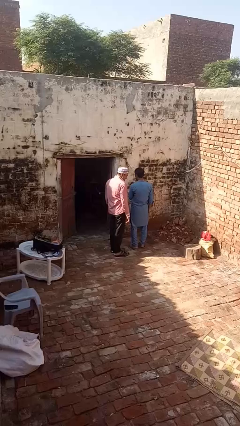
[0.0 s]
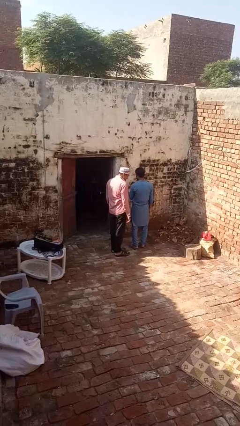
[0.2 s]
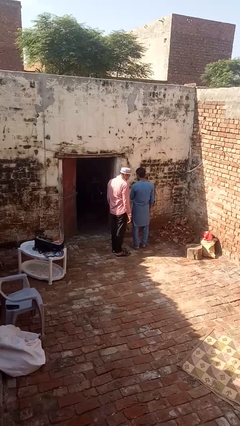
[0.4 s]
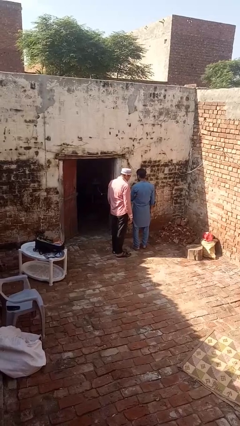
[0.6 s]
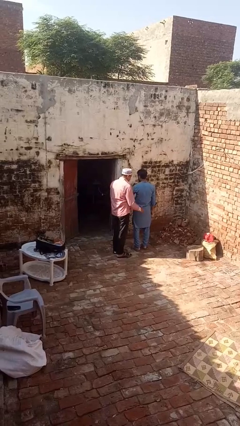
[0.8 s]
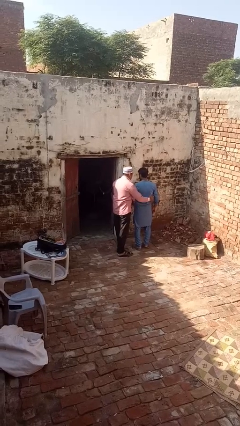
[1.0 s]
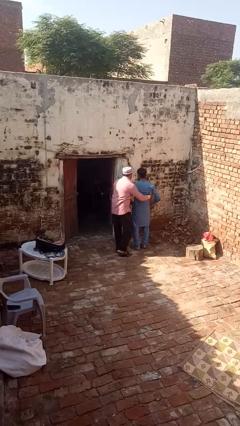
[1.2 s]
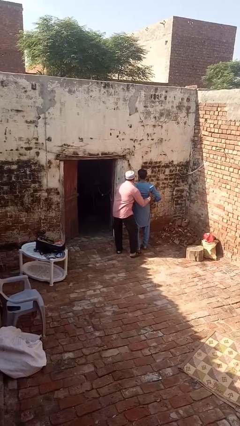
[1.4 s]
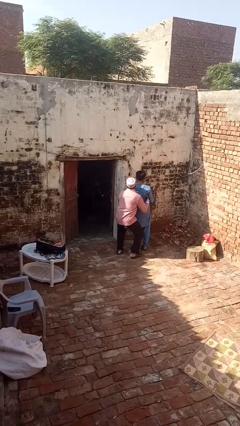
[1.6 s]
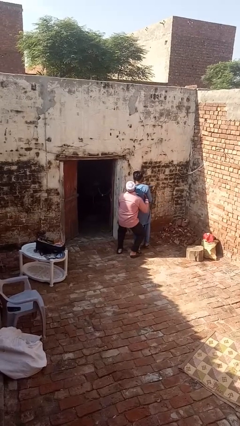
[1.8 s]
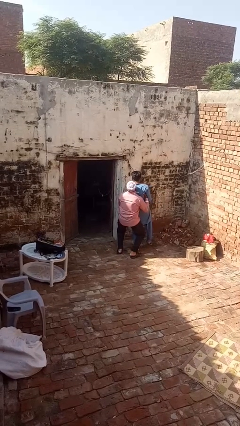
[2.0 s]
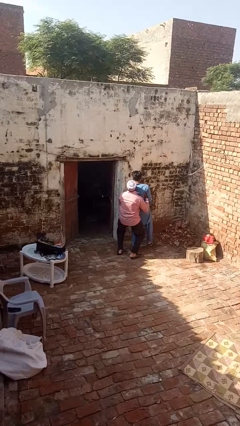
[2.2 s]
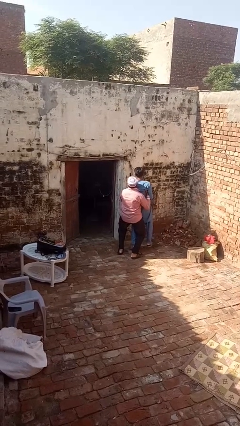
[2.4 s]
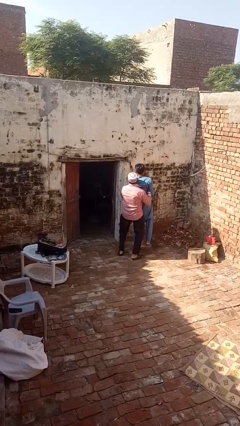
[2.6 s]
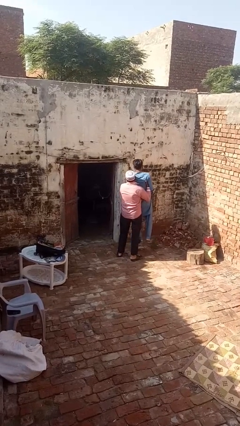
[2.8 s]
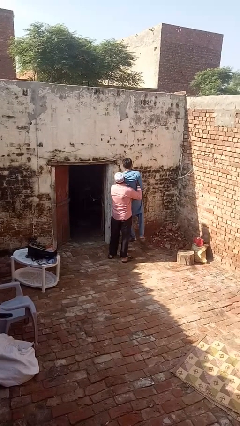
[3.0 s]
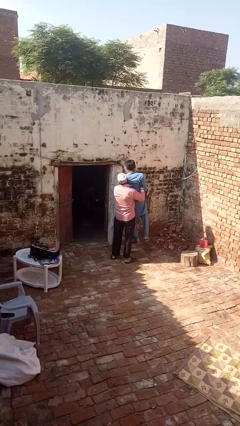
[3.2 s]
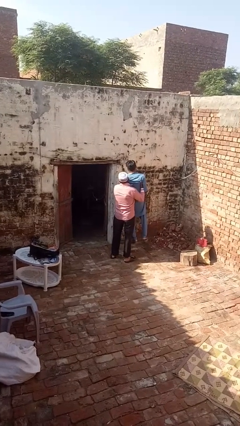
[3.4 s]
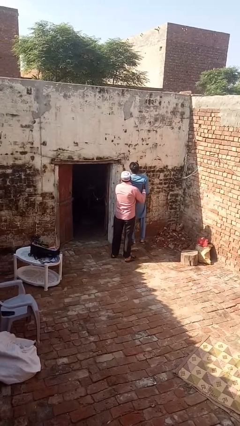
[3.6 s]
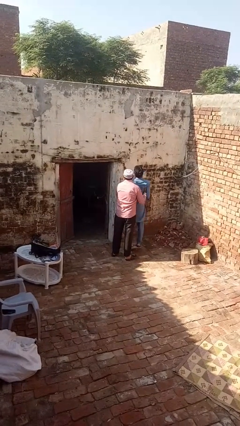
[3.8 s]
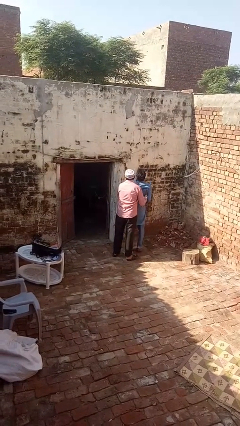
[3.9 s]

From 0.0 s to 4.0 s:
person picks up person

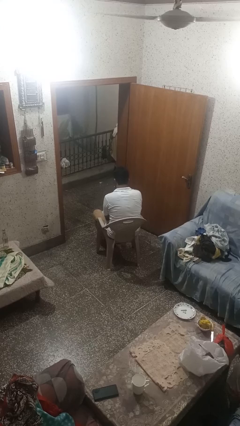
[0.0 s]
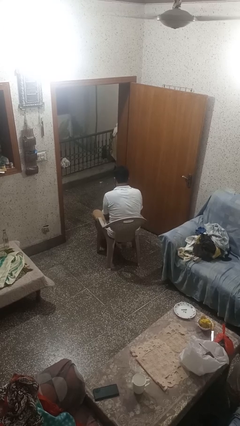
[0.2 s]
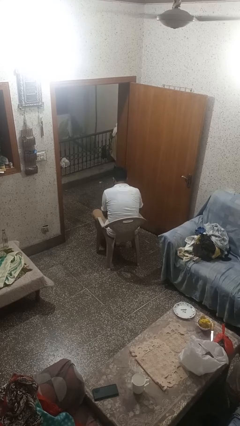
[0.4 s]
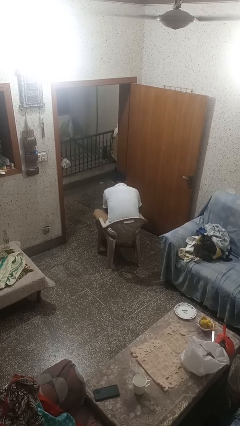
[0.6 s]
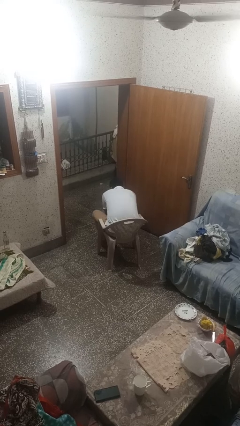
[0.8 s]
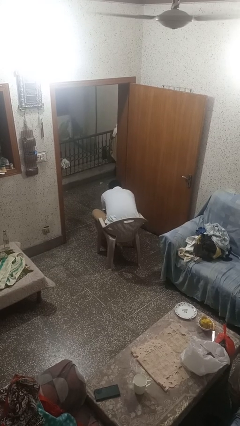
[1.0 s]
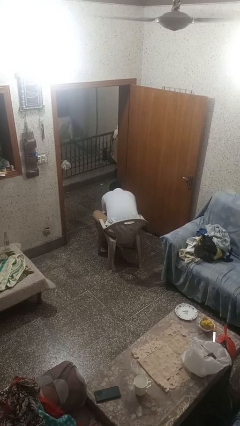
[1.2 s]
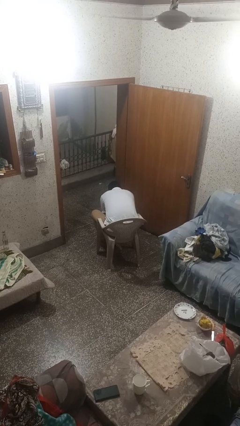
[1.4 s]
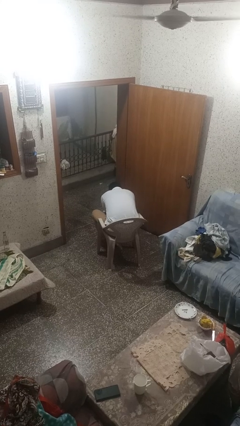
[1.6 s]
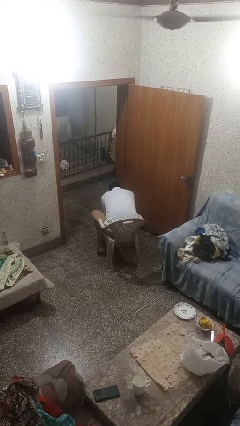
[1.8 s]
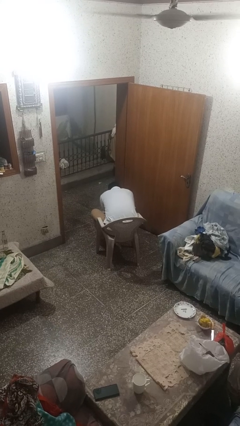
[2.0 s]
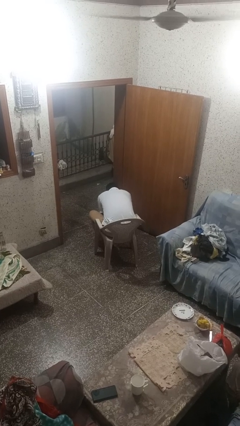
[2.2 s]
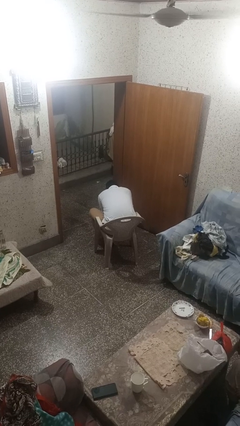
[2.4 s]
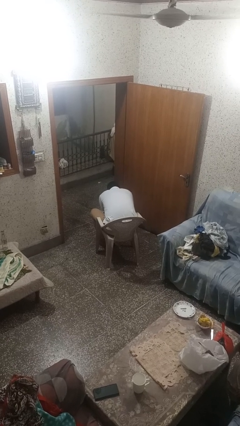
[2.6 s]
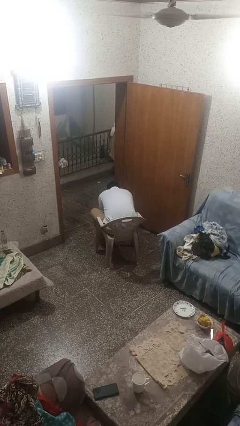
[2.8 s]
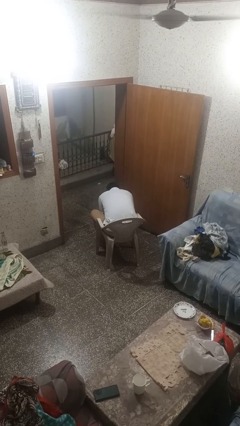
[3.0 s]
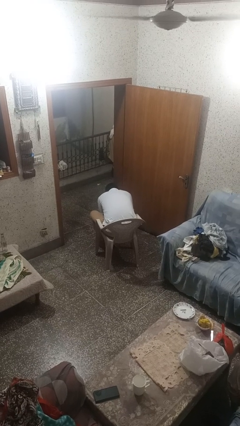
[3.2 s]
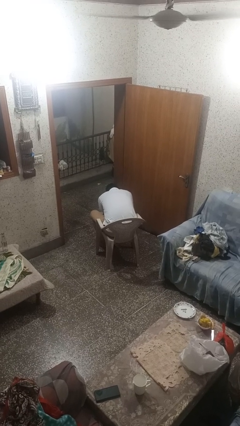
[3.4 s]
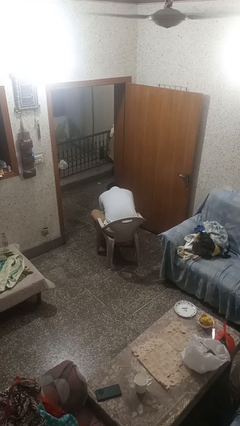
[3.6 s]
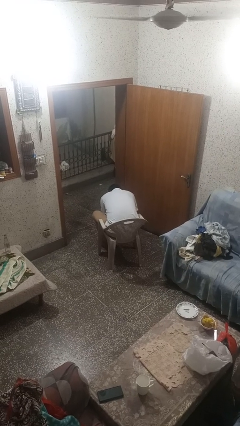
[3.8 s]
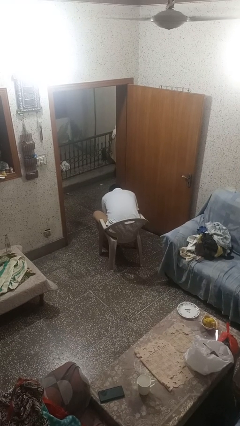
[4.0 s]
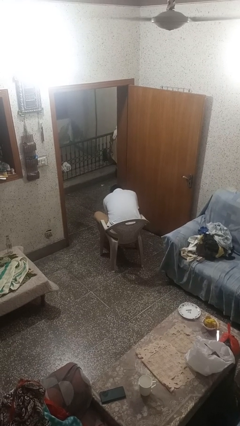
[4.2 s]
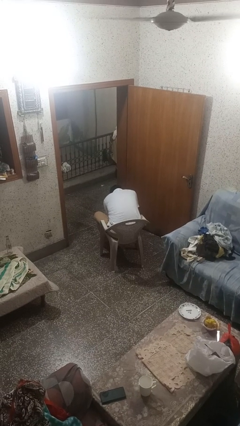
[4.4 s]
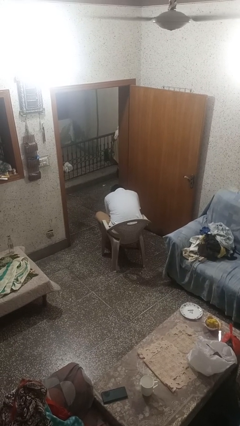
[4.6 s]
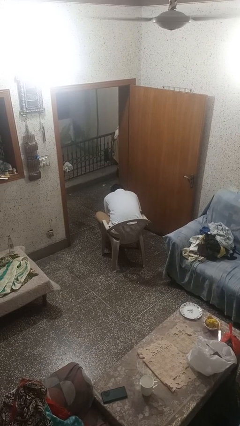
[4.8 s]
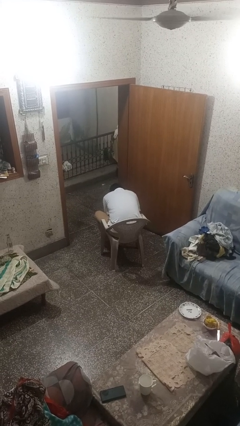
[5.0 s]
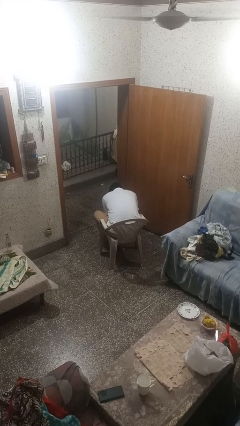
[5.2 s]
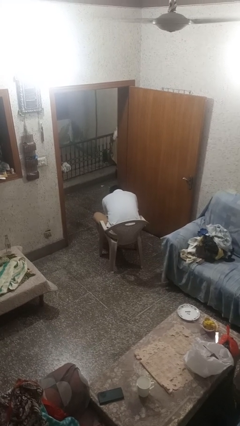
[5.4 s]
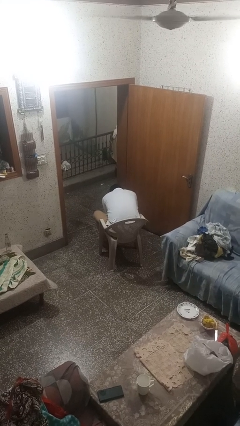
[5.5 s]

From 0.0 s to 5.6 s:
person puts on socks

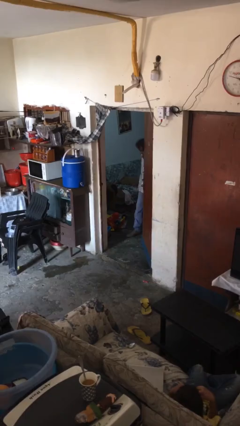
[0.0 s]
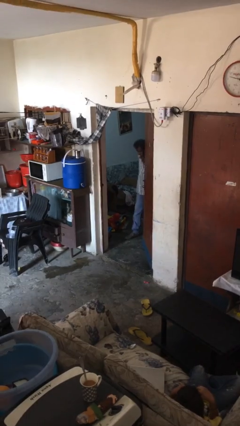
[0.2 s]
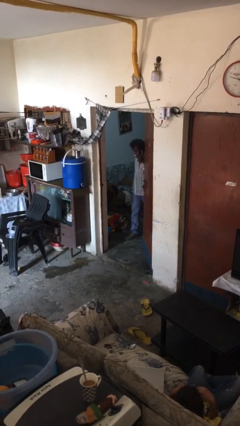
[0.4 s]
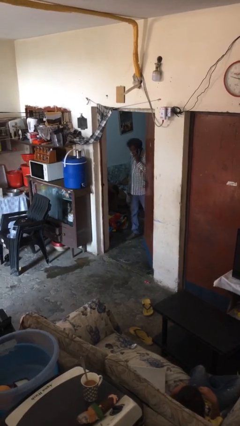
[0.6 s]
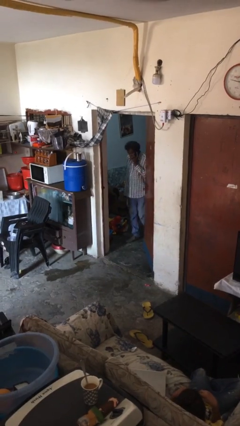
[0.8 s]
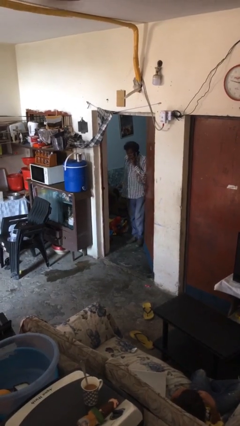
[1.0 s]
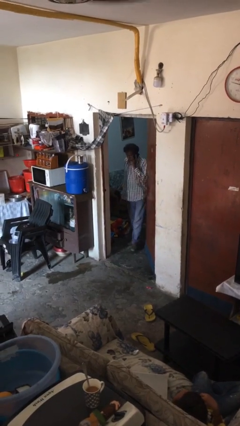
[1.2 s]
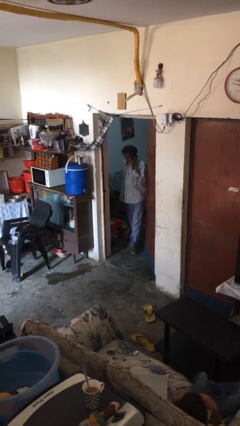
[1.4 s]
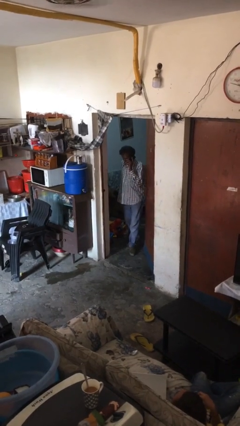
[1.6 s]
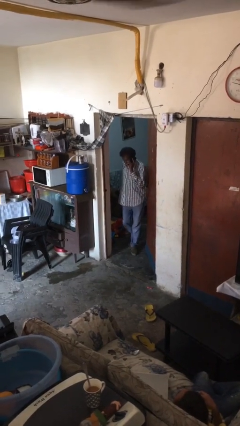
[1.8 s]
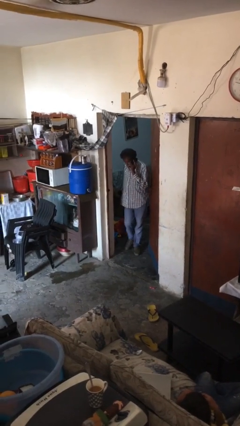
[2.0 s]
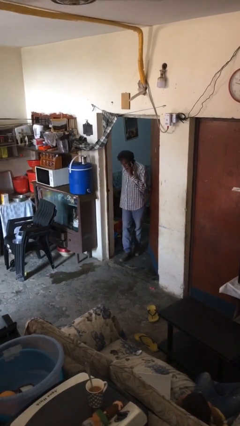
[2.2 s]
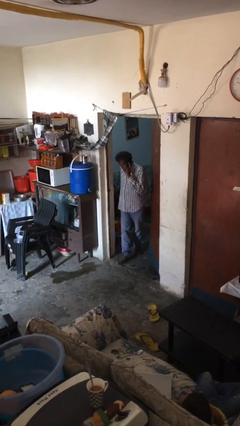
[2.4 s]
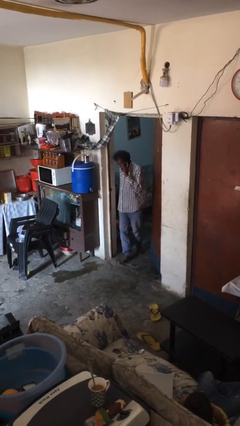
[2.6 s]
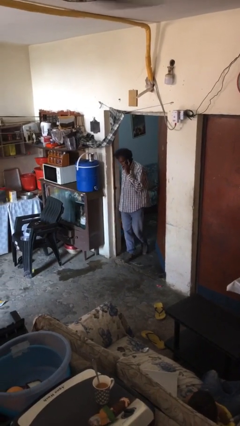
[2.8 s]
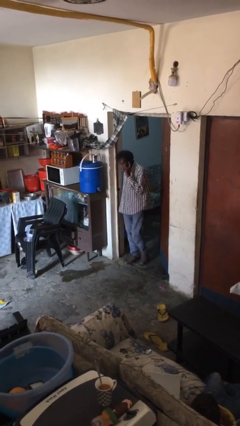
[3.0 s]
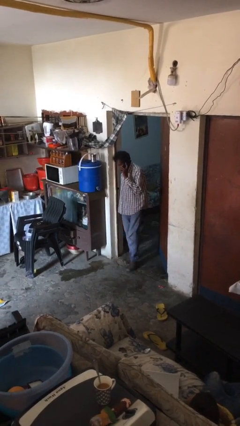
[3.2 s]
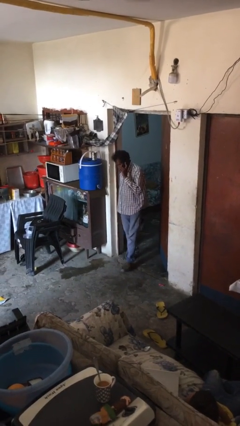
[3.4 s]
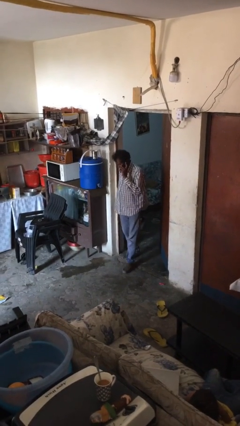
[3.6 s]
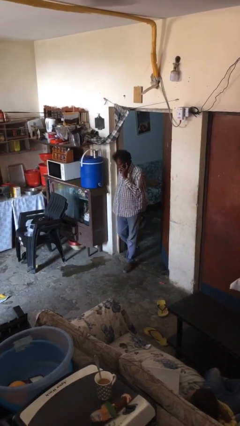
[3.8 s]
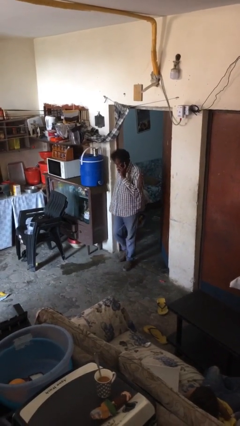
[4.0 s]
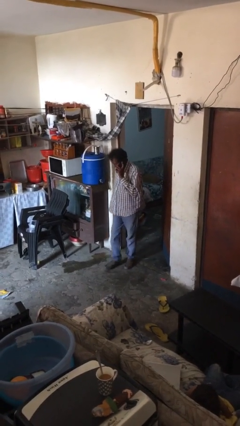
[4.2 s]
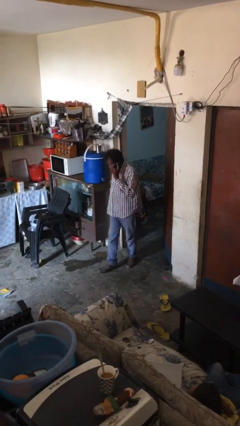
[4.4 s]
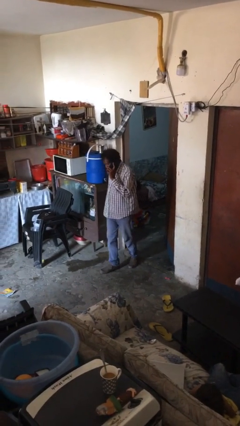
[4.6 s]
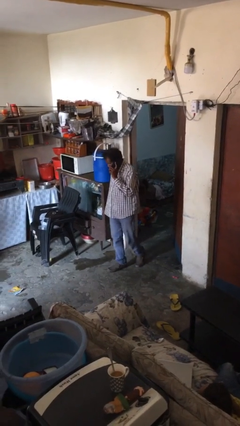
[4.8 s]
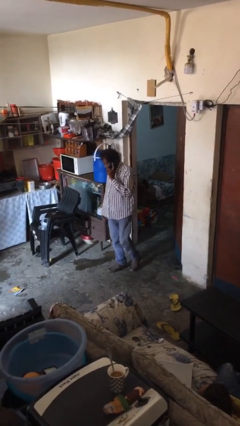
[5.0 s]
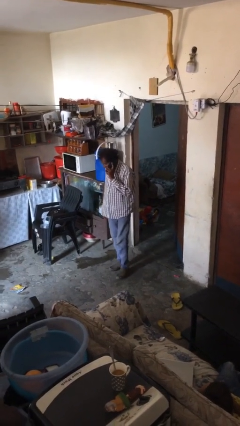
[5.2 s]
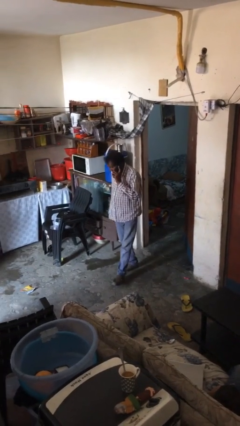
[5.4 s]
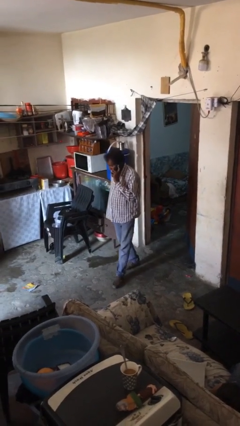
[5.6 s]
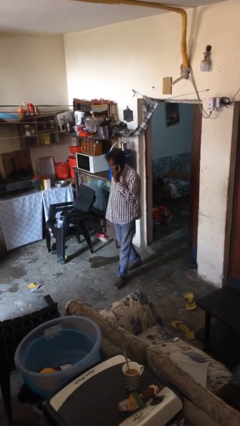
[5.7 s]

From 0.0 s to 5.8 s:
person enters scene through structure

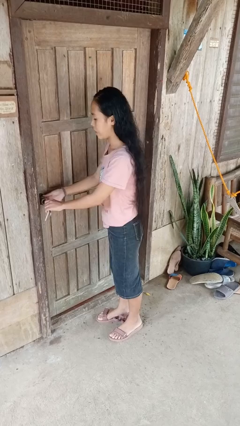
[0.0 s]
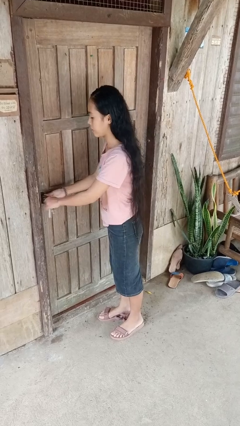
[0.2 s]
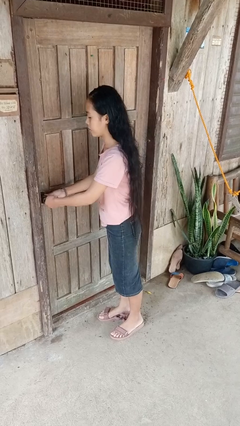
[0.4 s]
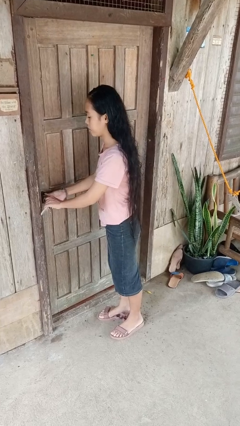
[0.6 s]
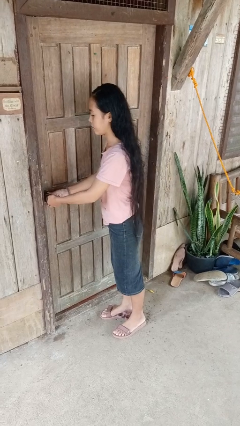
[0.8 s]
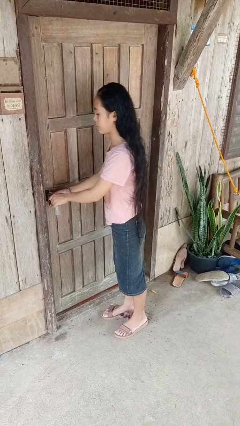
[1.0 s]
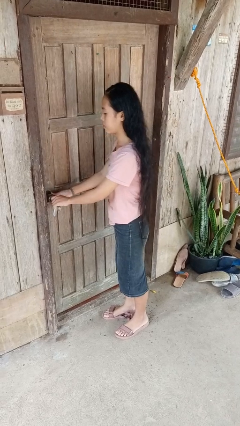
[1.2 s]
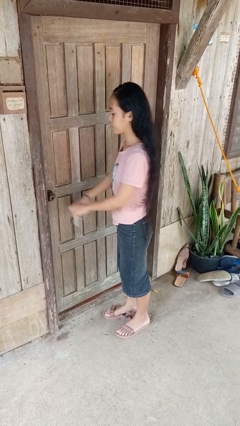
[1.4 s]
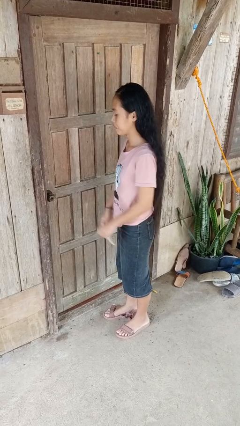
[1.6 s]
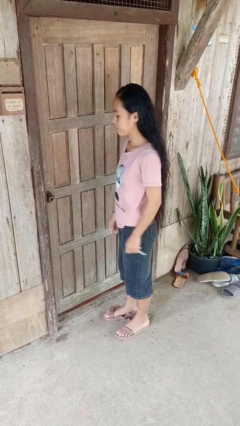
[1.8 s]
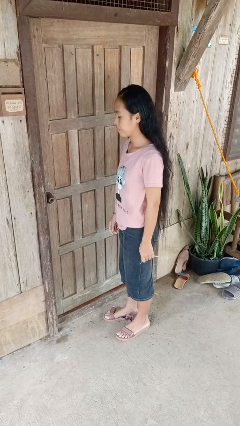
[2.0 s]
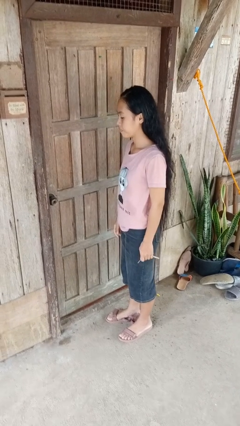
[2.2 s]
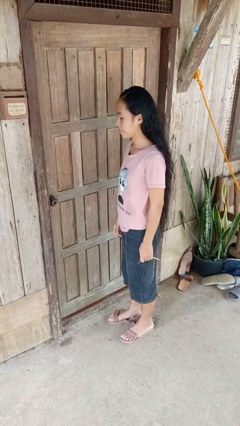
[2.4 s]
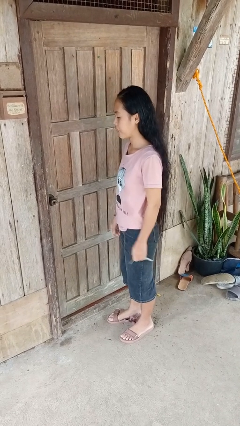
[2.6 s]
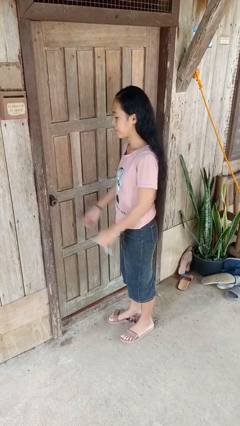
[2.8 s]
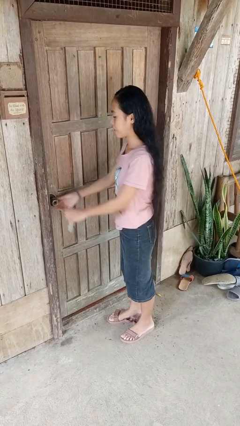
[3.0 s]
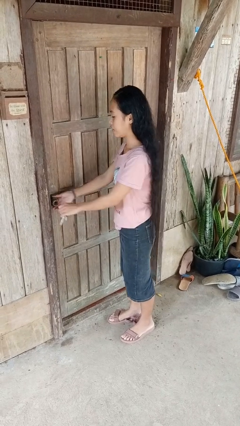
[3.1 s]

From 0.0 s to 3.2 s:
person locks door with keys
